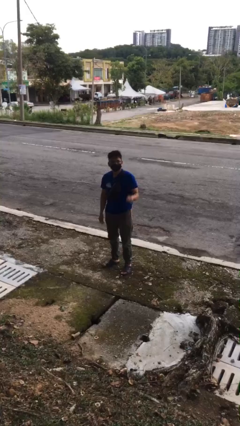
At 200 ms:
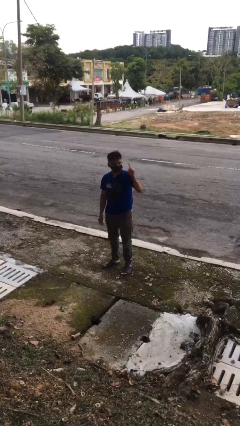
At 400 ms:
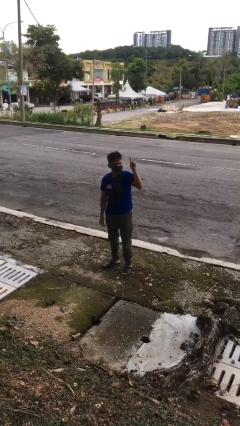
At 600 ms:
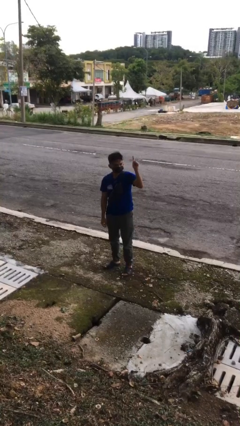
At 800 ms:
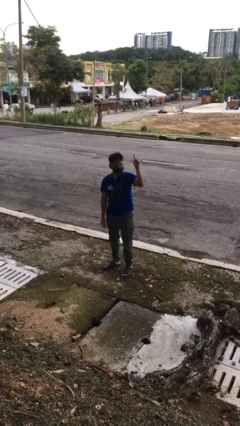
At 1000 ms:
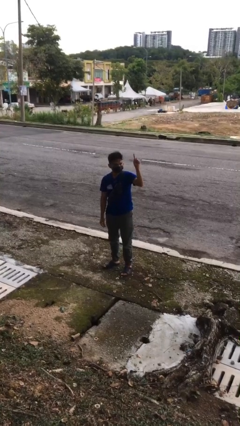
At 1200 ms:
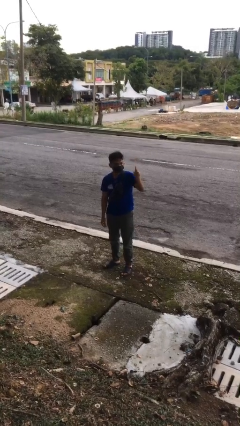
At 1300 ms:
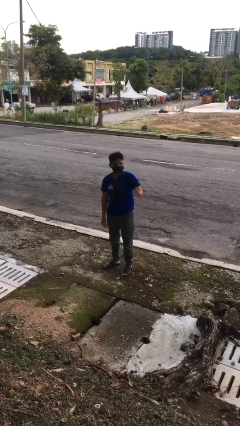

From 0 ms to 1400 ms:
person gestures number one

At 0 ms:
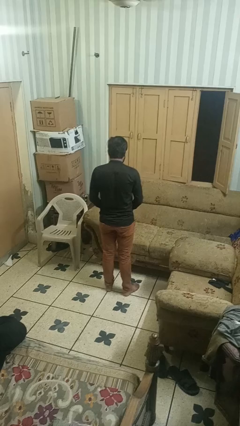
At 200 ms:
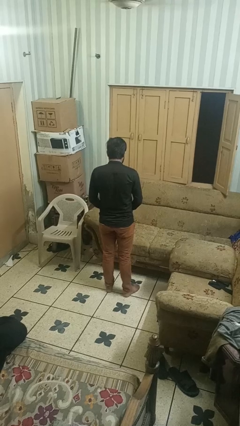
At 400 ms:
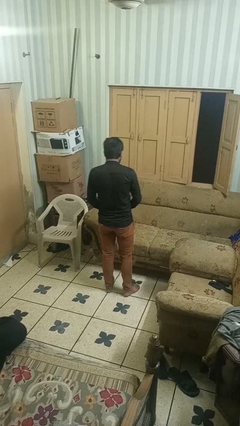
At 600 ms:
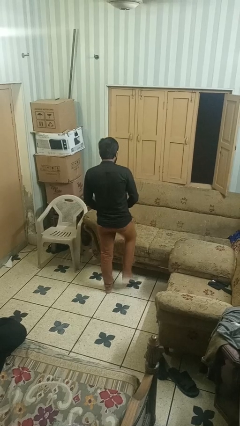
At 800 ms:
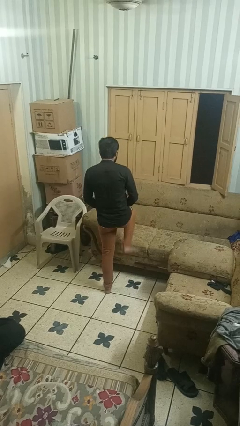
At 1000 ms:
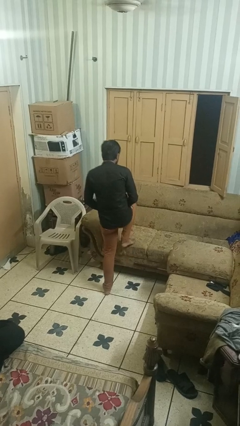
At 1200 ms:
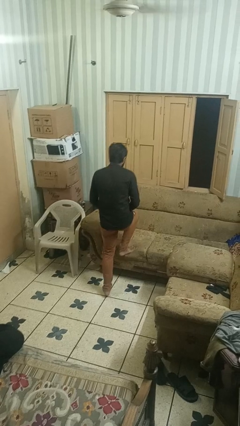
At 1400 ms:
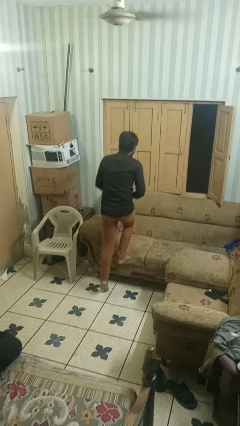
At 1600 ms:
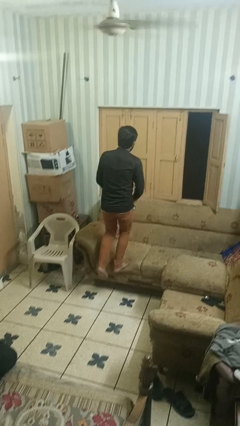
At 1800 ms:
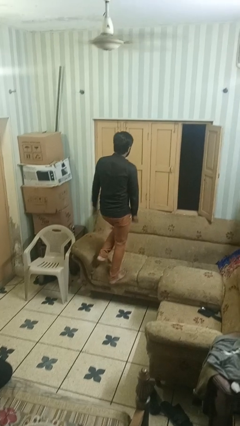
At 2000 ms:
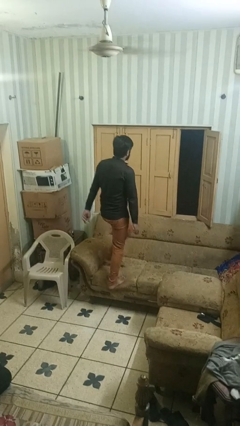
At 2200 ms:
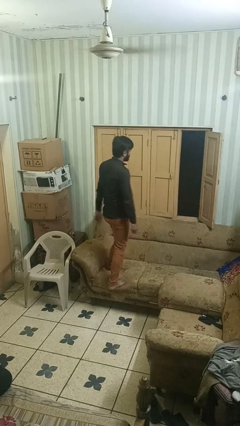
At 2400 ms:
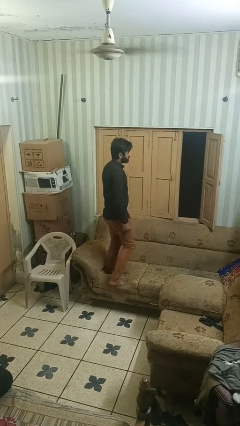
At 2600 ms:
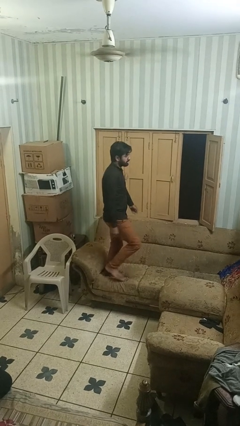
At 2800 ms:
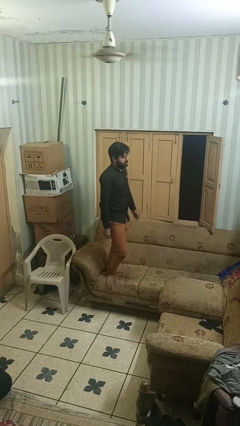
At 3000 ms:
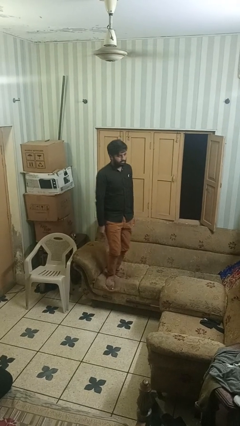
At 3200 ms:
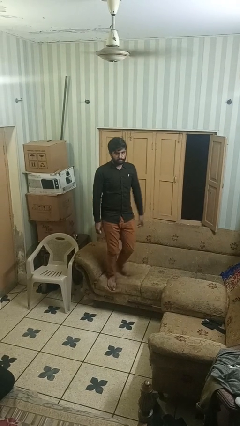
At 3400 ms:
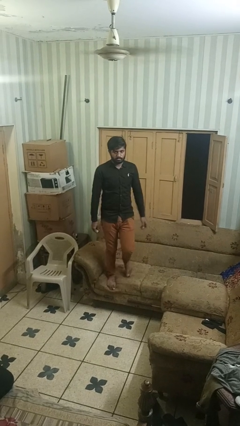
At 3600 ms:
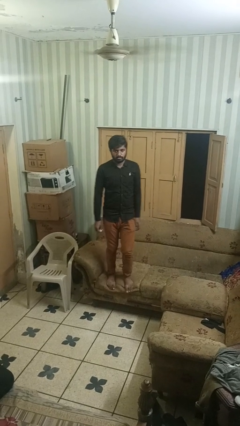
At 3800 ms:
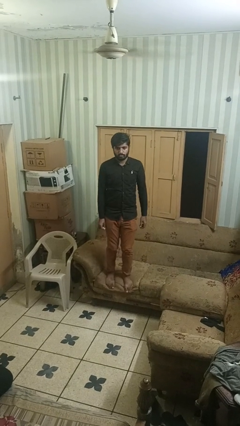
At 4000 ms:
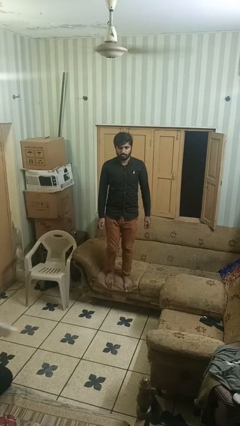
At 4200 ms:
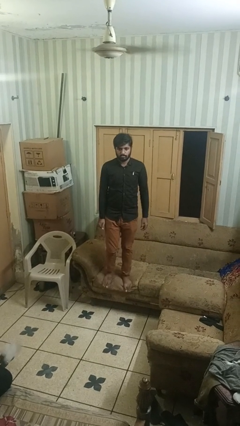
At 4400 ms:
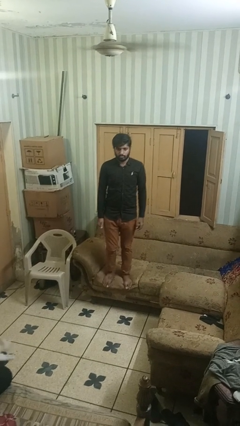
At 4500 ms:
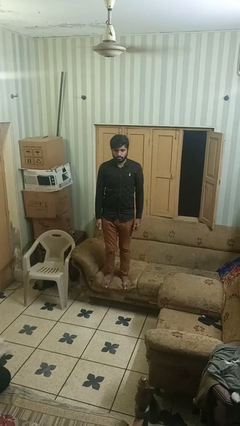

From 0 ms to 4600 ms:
person climbs on couch

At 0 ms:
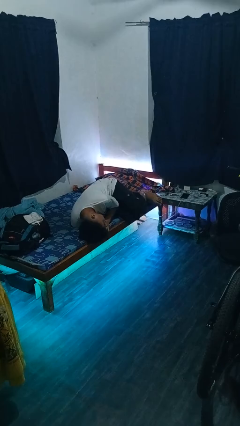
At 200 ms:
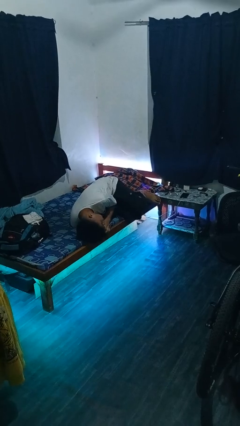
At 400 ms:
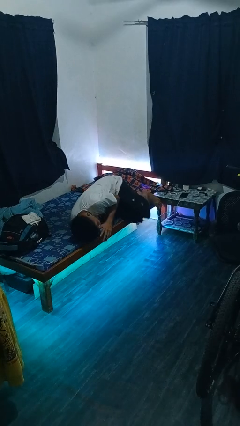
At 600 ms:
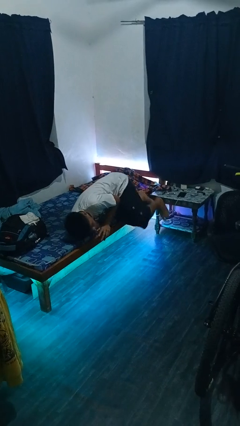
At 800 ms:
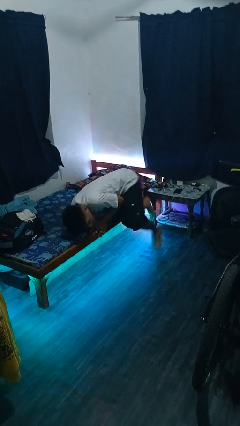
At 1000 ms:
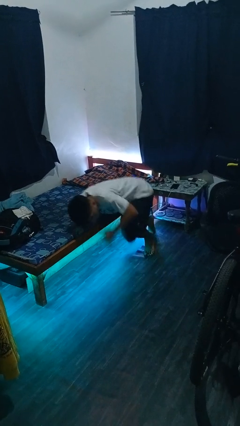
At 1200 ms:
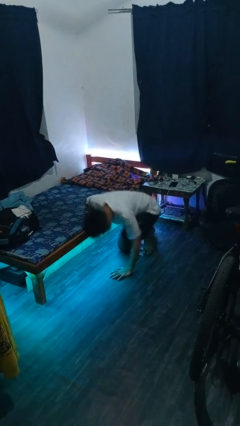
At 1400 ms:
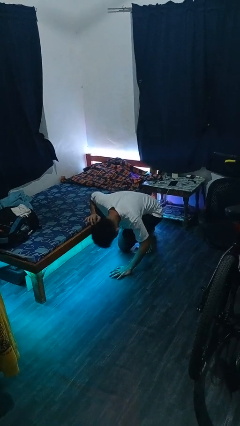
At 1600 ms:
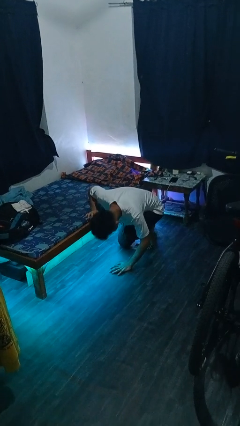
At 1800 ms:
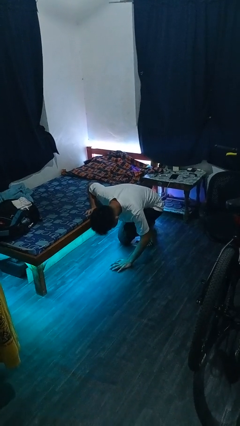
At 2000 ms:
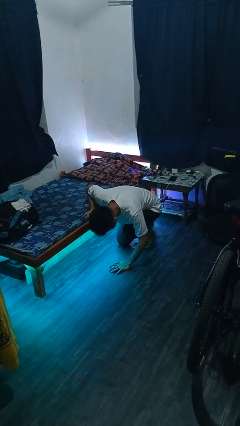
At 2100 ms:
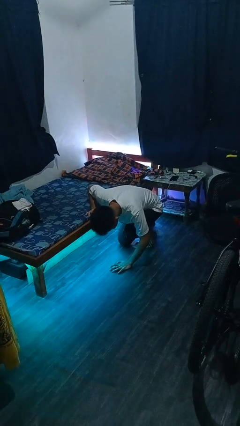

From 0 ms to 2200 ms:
person falls from bed

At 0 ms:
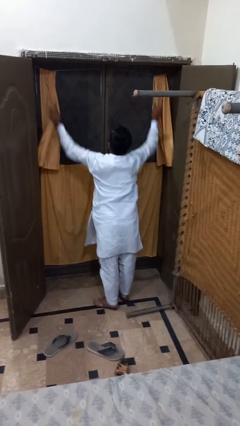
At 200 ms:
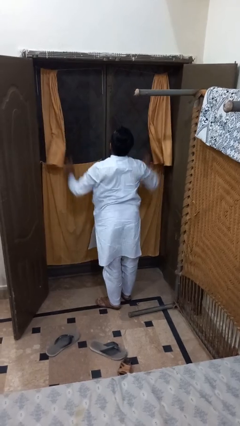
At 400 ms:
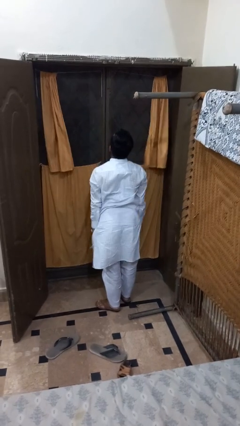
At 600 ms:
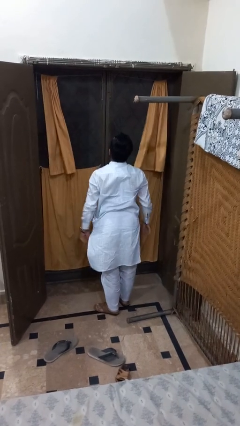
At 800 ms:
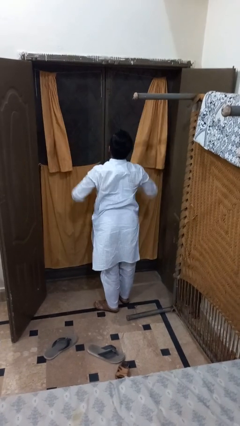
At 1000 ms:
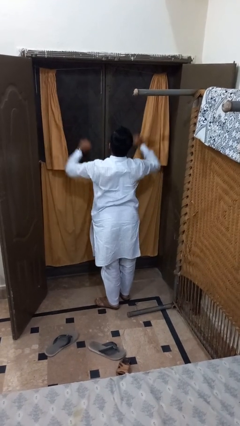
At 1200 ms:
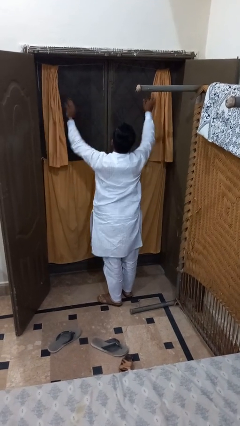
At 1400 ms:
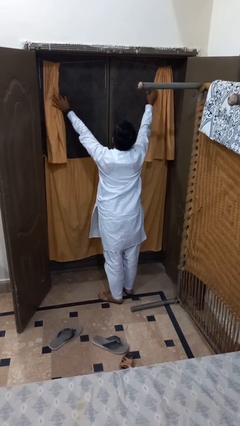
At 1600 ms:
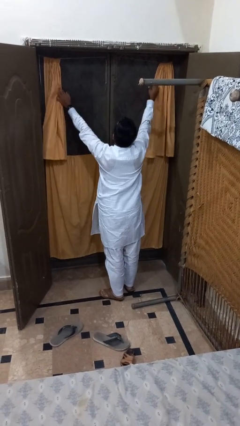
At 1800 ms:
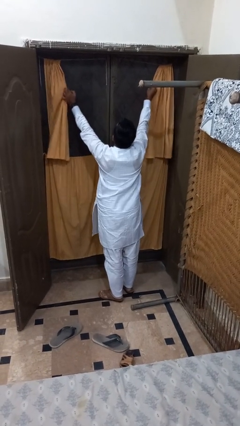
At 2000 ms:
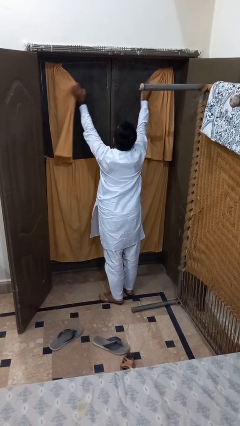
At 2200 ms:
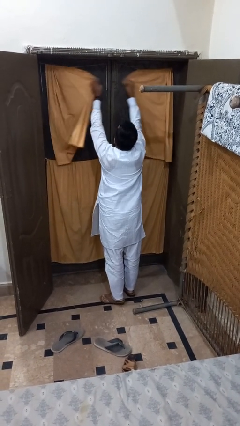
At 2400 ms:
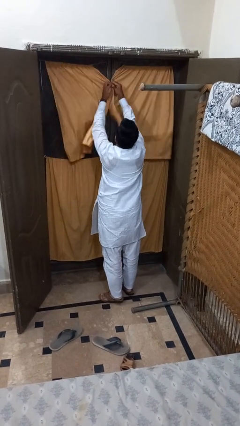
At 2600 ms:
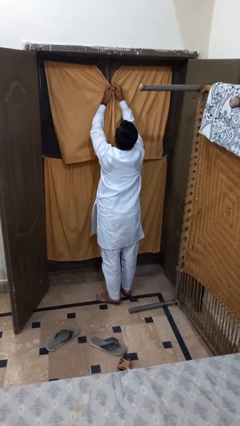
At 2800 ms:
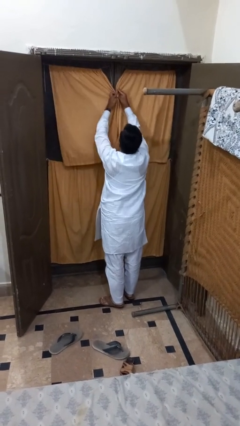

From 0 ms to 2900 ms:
person closes curtains

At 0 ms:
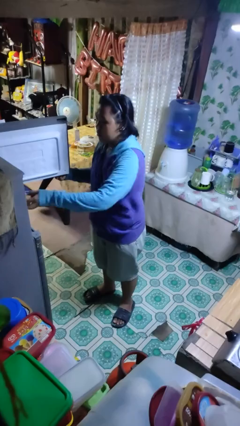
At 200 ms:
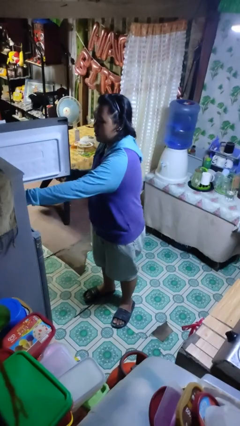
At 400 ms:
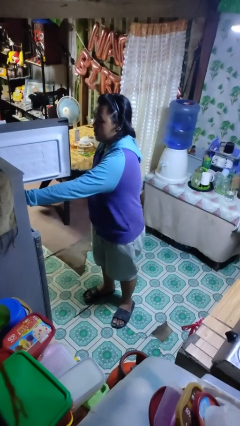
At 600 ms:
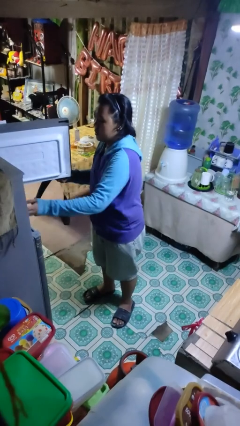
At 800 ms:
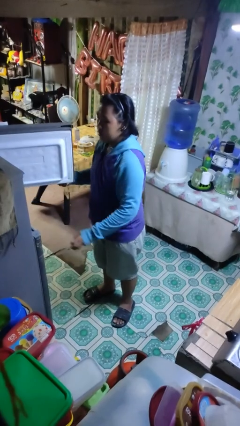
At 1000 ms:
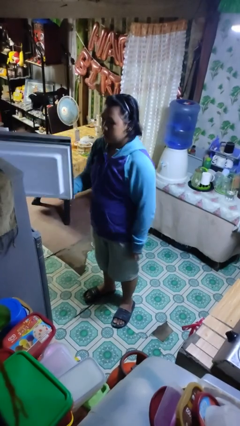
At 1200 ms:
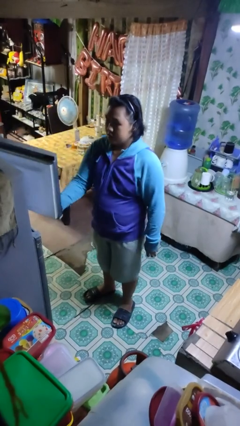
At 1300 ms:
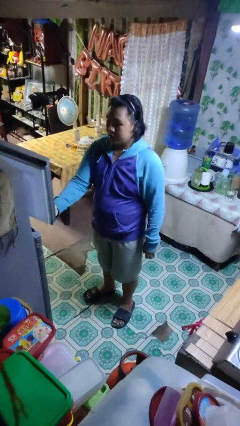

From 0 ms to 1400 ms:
person puts object into refrigerator

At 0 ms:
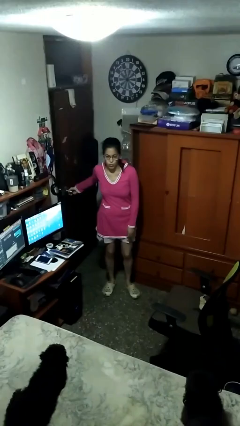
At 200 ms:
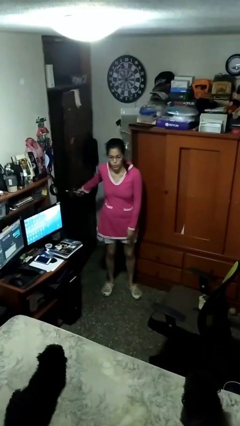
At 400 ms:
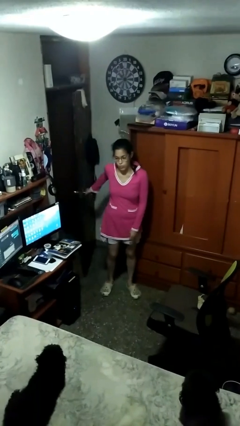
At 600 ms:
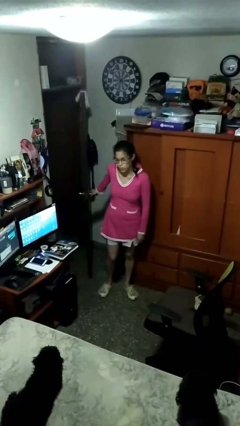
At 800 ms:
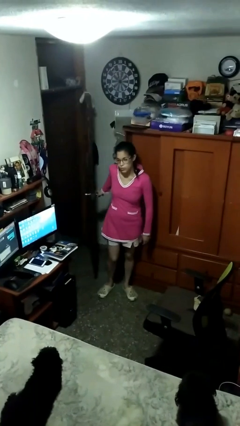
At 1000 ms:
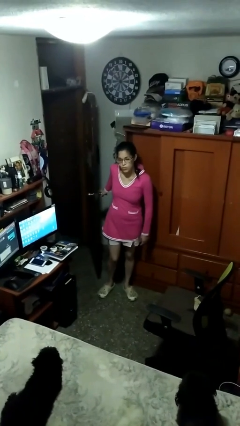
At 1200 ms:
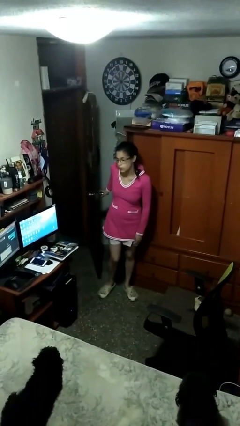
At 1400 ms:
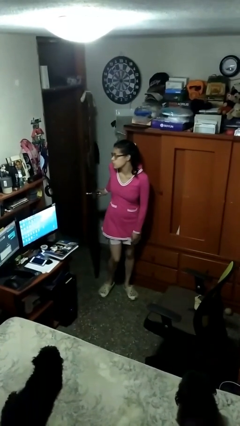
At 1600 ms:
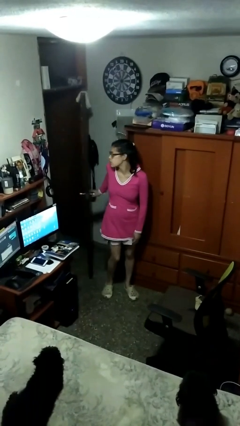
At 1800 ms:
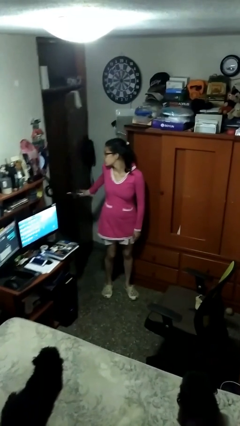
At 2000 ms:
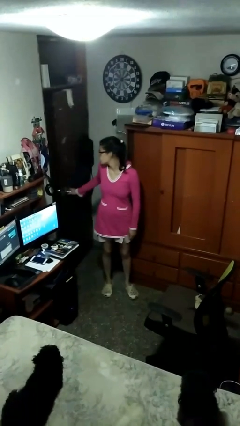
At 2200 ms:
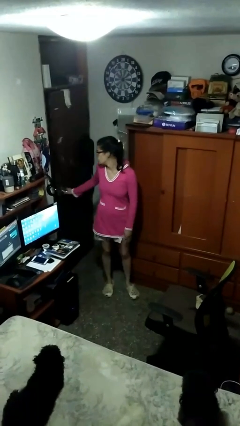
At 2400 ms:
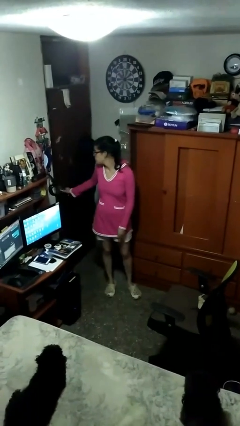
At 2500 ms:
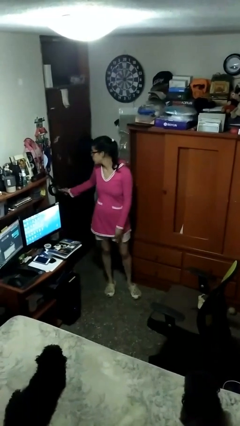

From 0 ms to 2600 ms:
person opens facility door

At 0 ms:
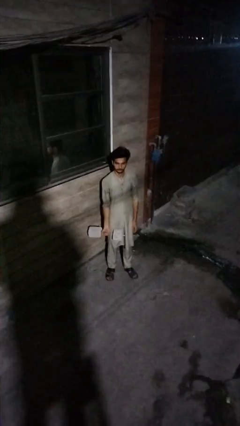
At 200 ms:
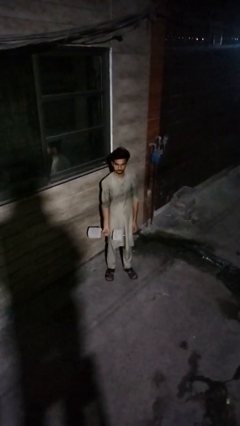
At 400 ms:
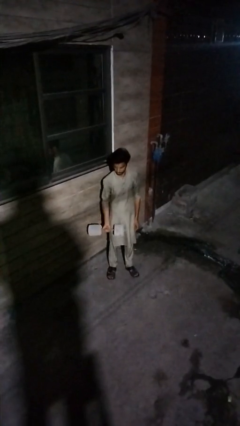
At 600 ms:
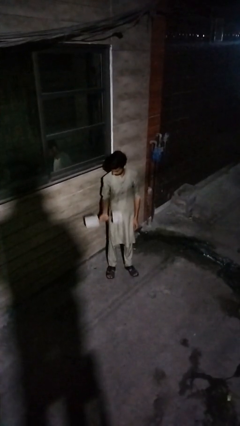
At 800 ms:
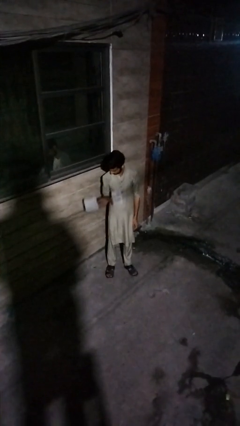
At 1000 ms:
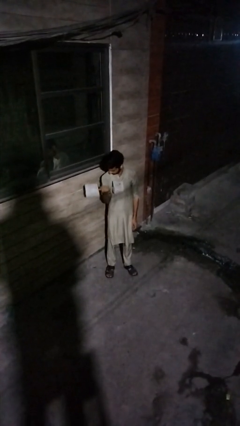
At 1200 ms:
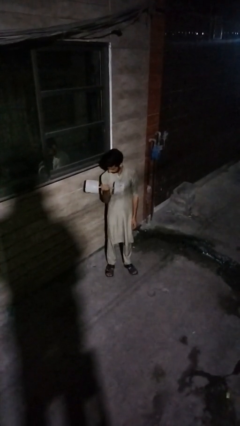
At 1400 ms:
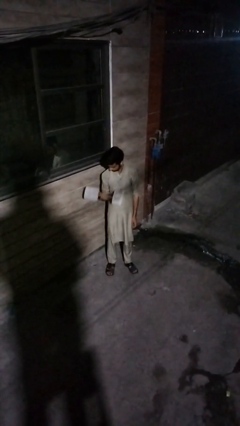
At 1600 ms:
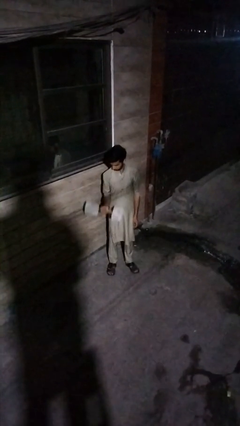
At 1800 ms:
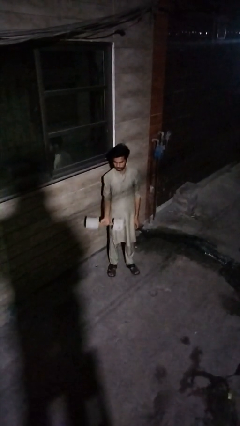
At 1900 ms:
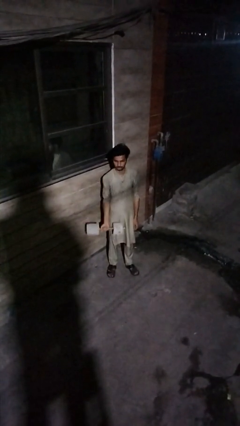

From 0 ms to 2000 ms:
person lifts dumbbells
